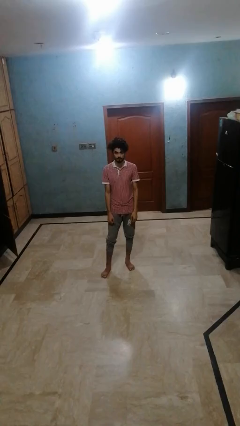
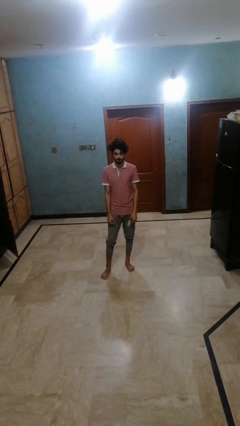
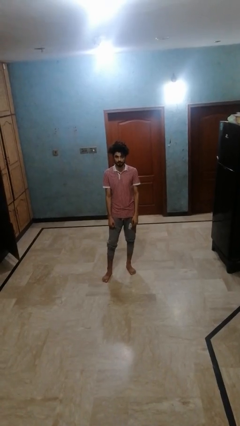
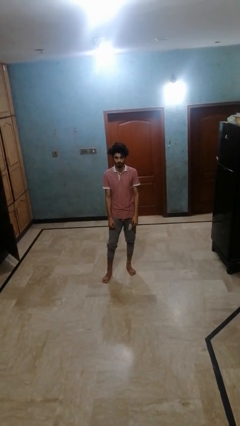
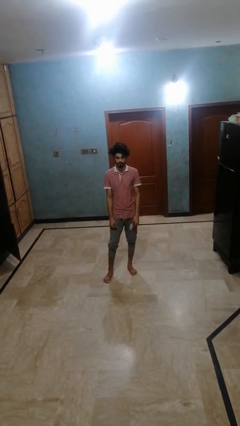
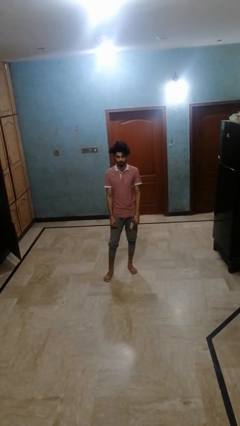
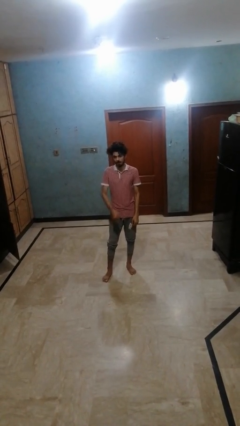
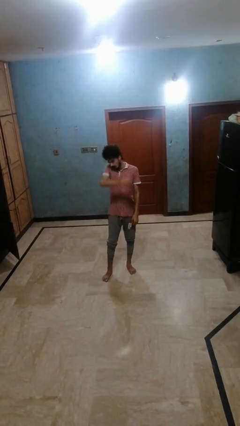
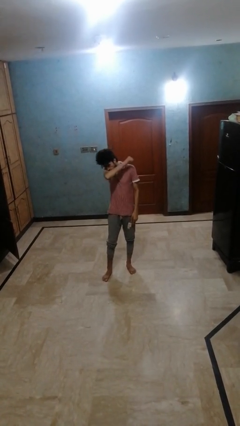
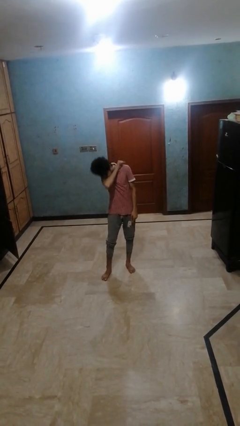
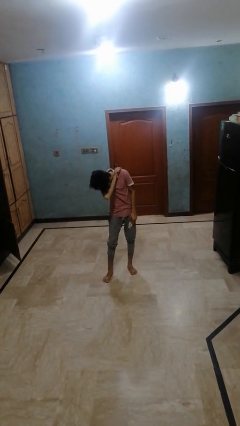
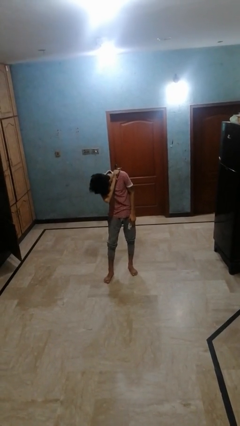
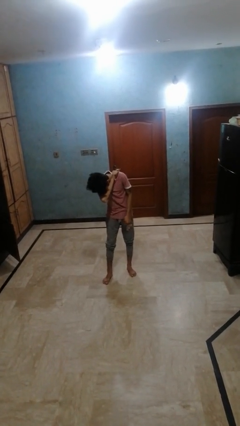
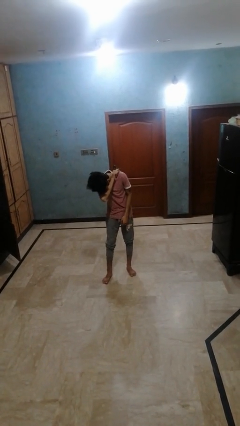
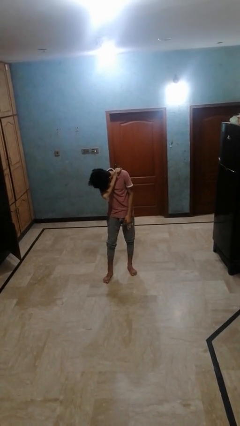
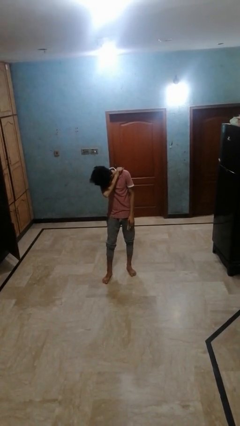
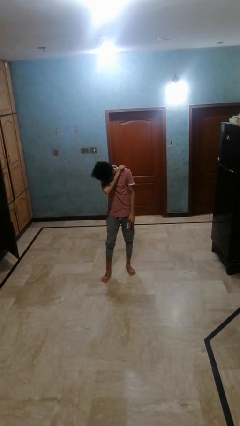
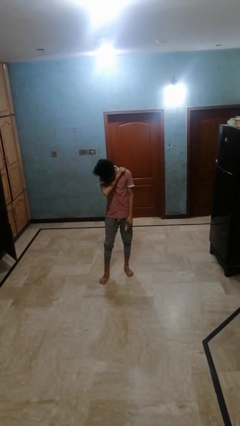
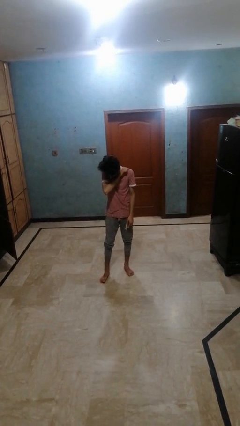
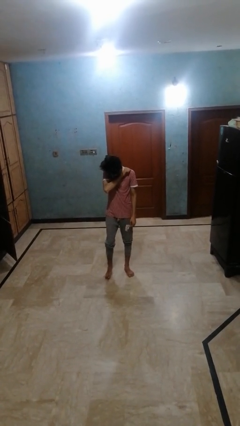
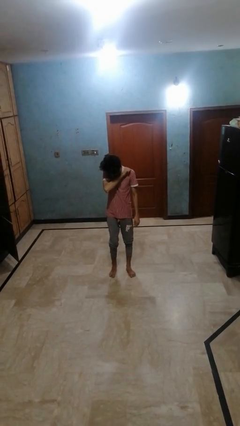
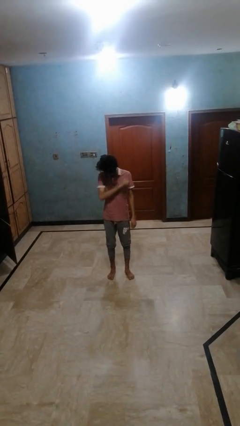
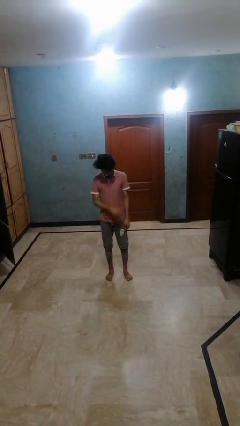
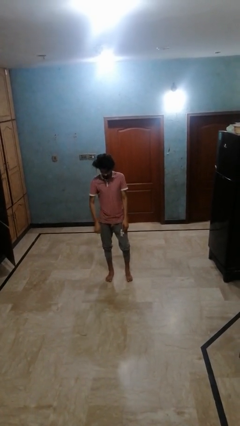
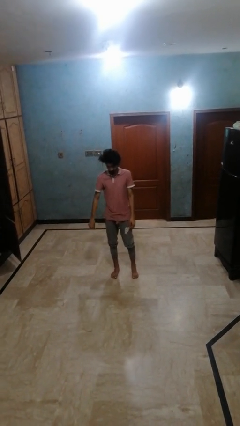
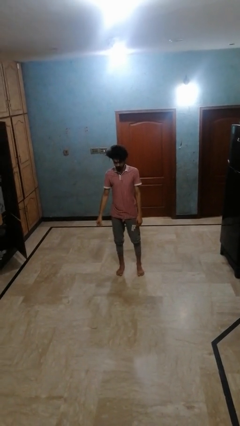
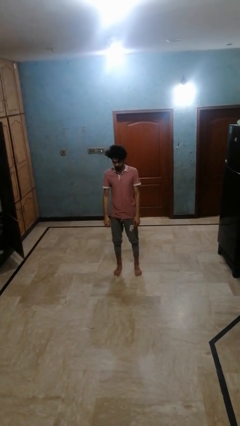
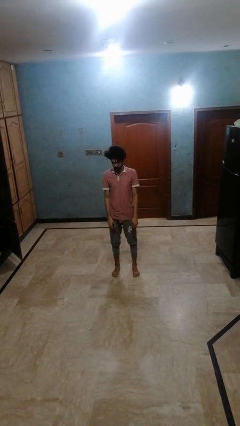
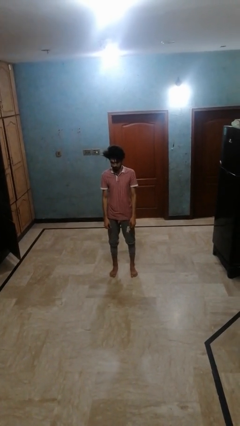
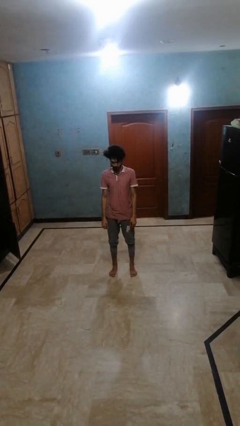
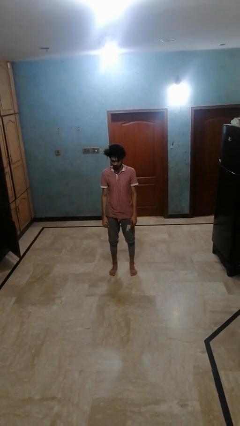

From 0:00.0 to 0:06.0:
person sneezes into arm

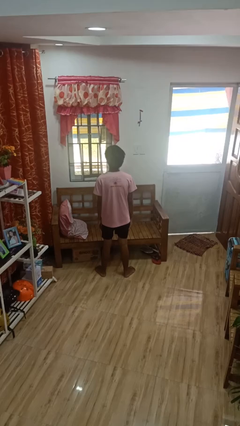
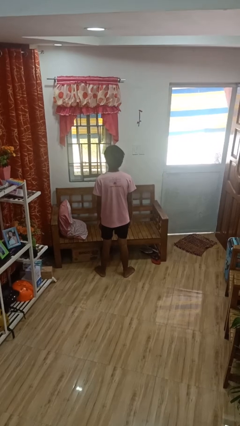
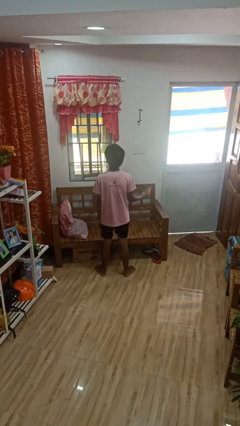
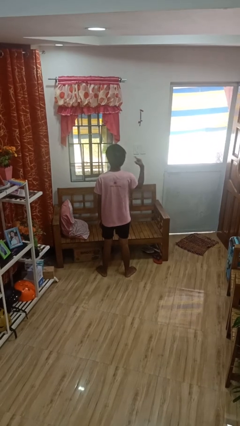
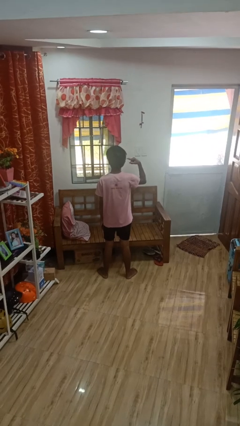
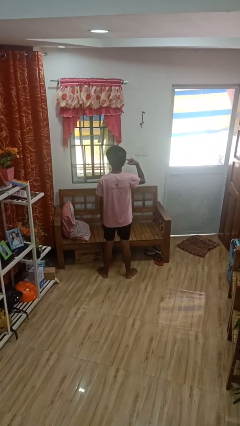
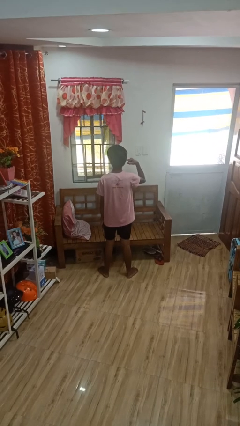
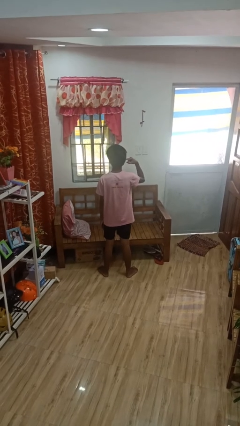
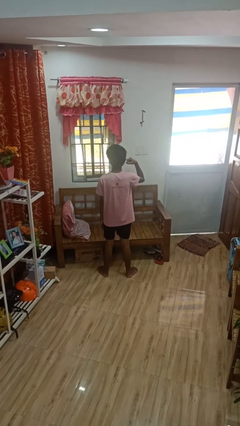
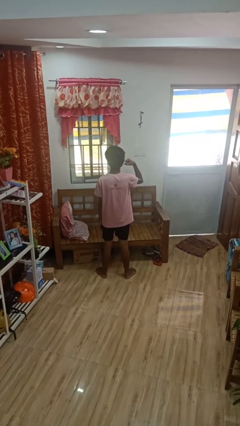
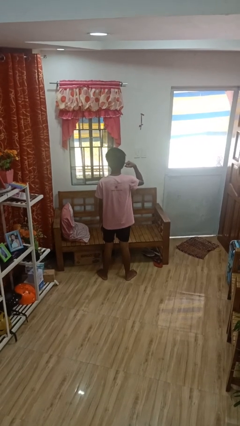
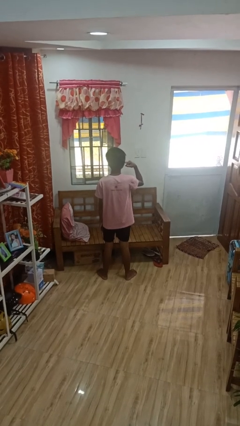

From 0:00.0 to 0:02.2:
person gestures listen closely

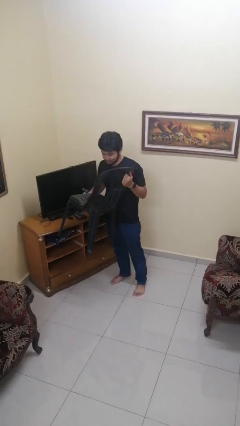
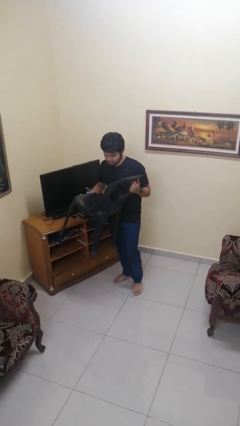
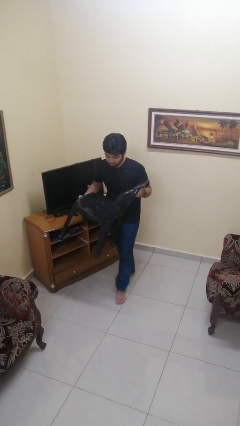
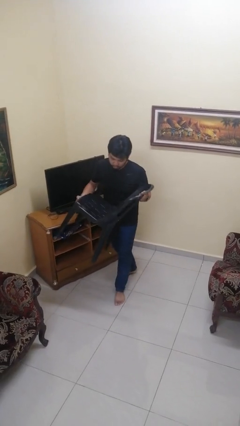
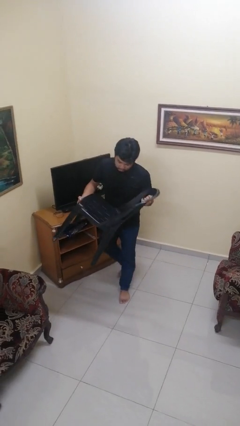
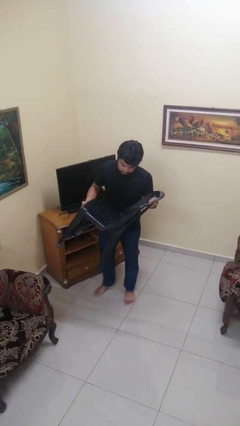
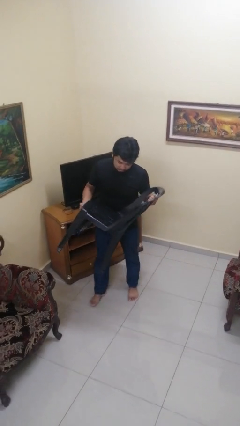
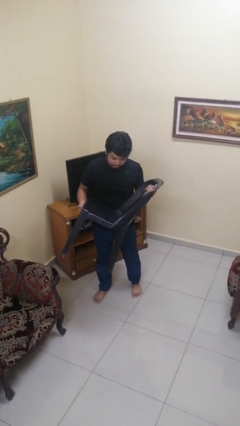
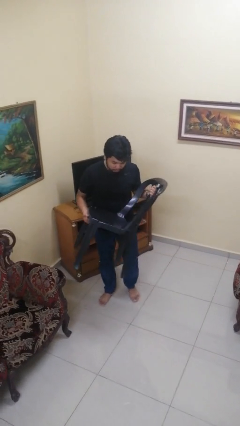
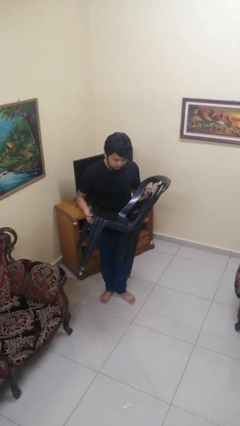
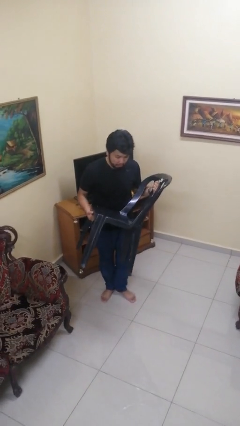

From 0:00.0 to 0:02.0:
person carries furniture

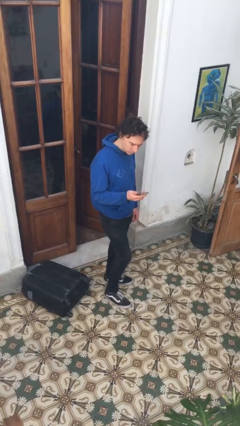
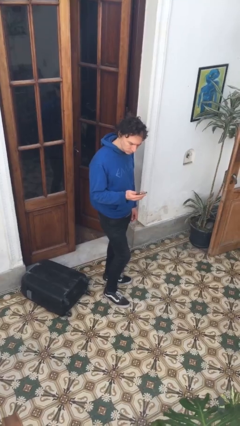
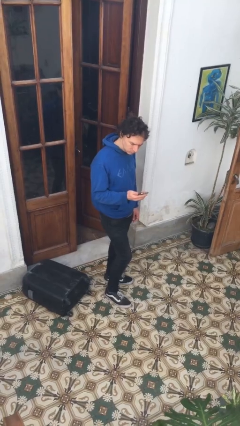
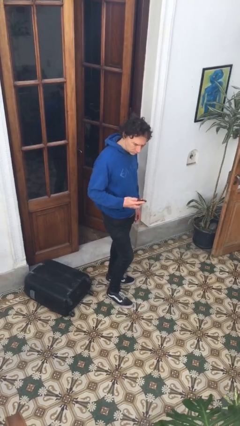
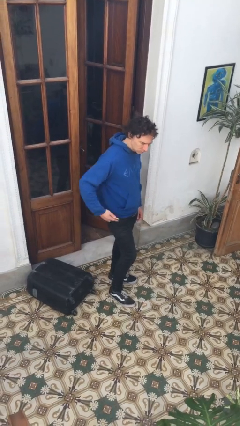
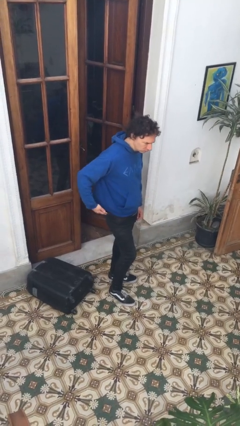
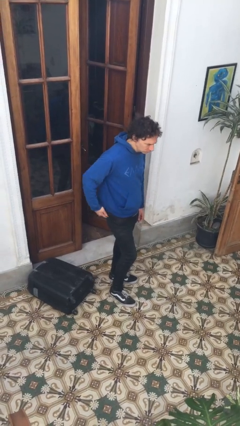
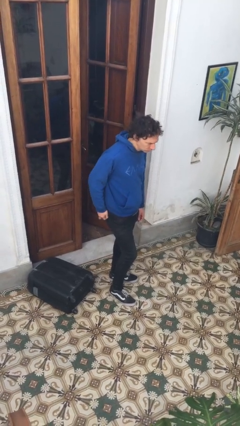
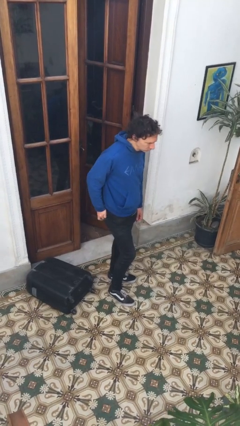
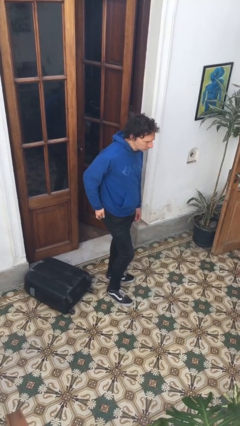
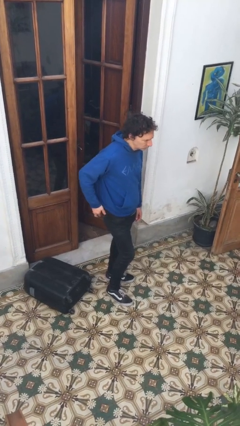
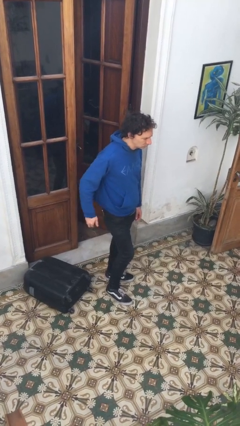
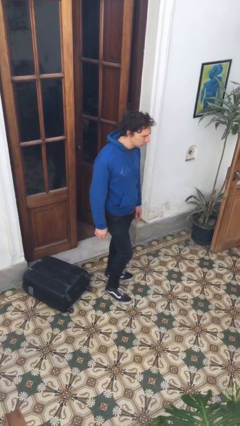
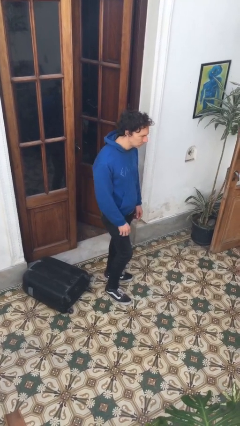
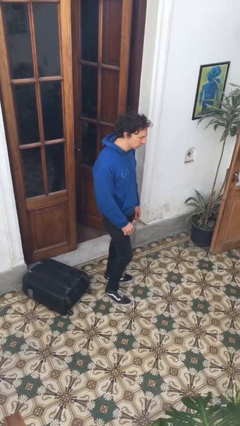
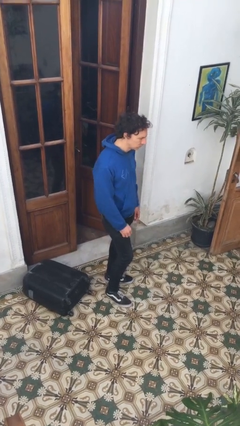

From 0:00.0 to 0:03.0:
person puts phone into pocket

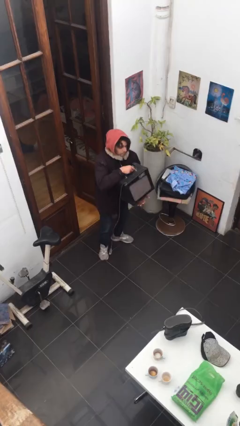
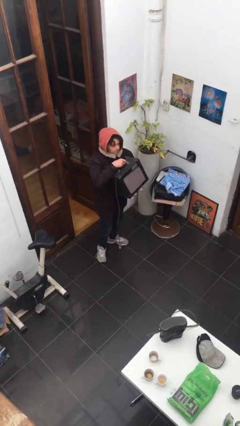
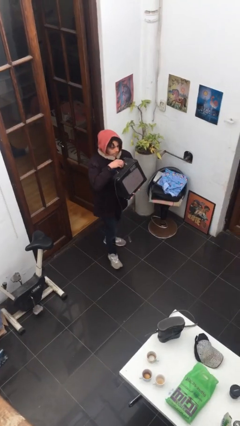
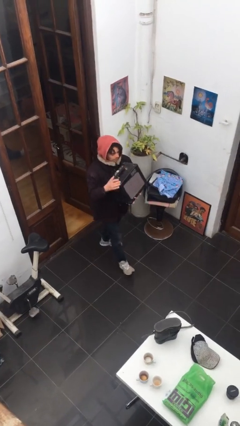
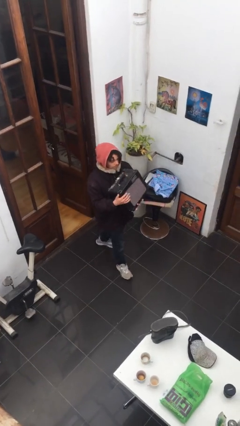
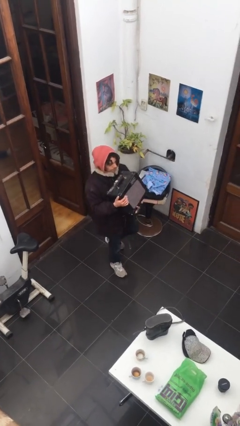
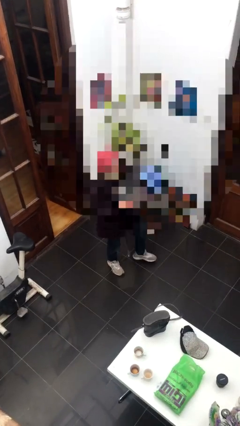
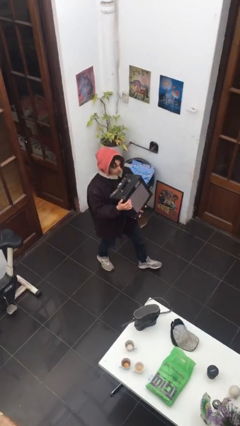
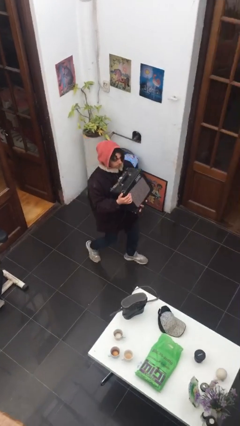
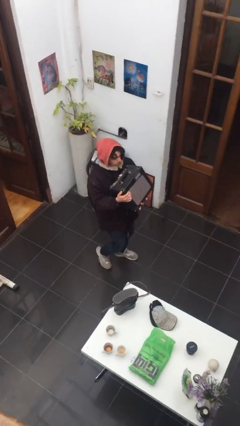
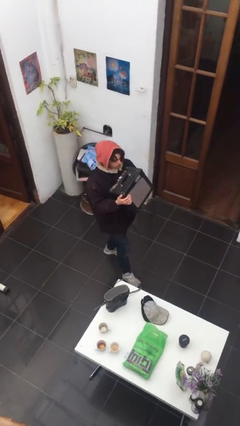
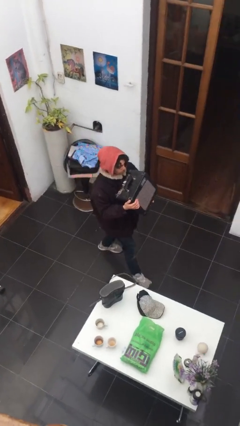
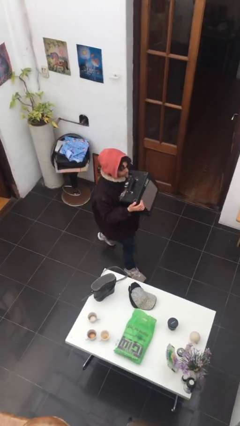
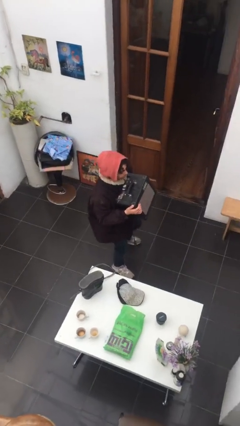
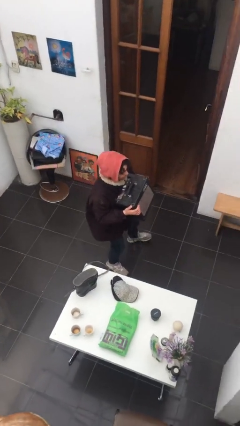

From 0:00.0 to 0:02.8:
person carries heavy object

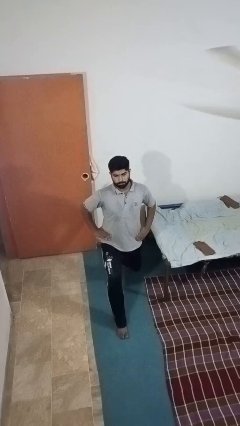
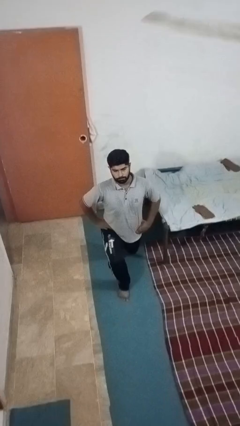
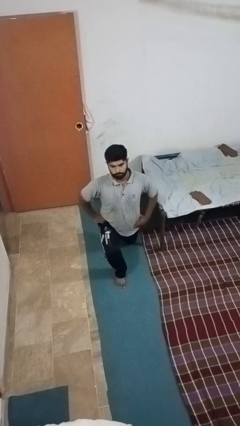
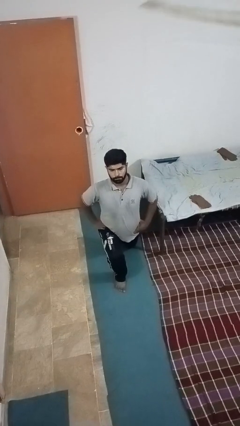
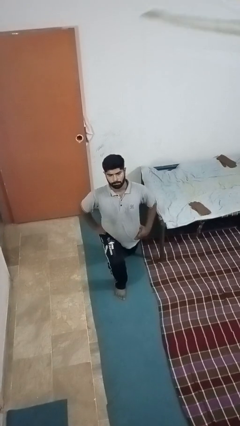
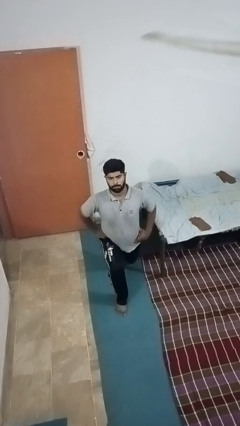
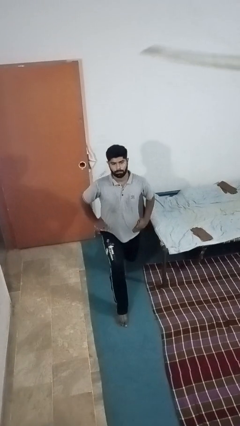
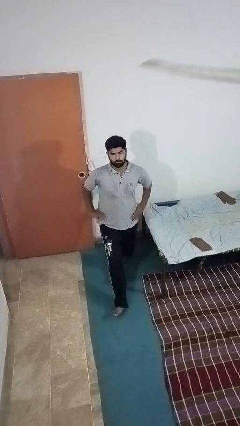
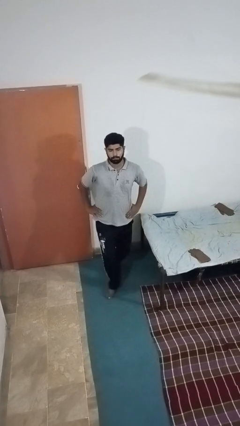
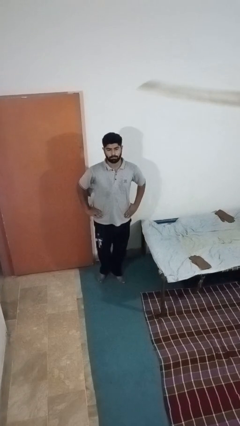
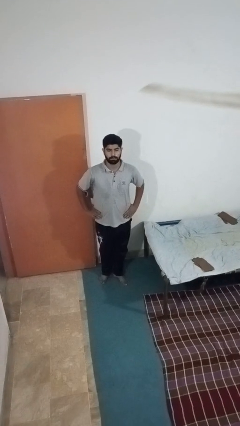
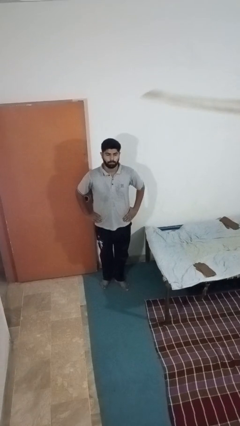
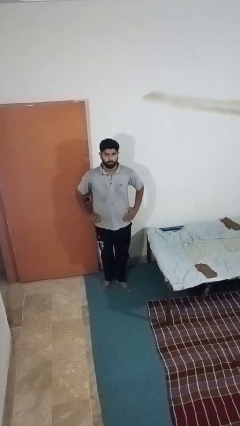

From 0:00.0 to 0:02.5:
person exercises with lunges
